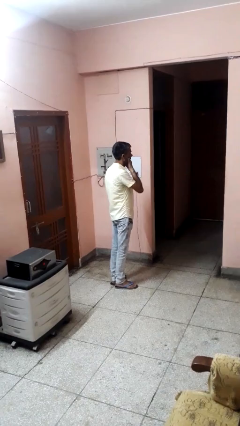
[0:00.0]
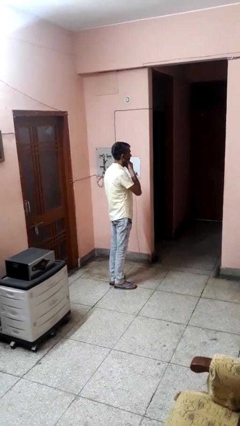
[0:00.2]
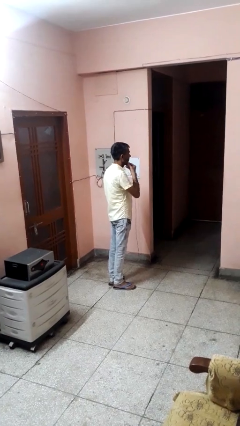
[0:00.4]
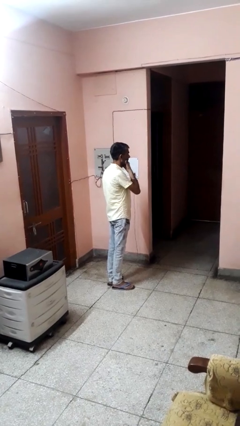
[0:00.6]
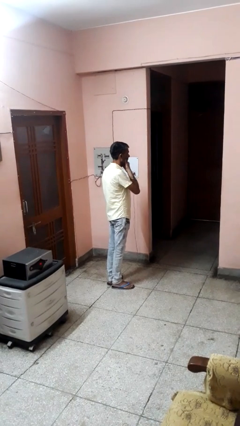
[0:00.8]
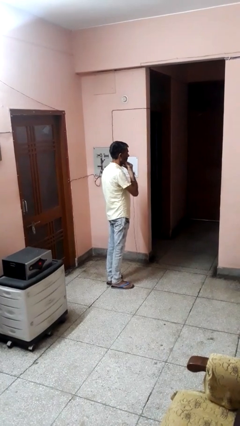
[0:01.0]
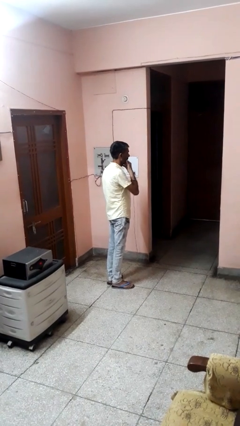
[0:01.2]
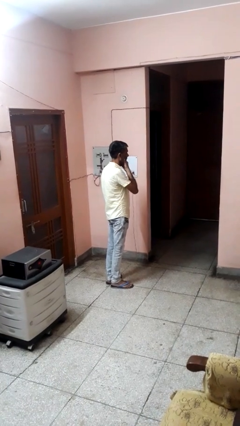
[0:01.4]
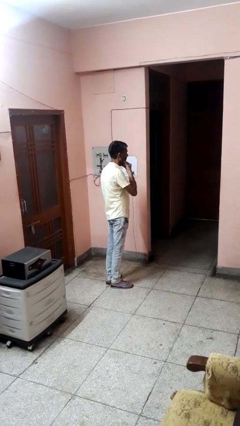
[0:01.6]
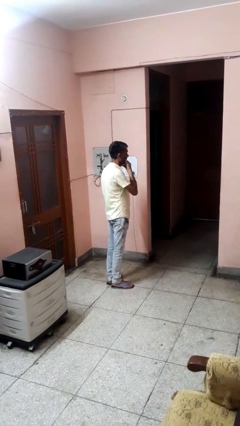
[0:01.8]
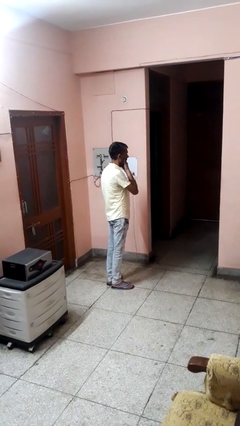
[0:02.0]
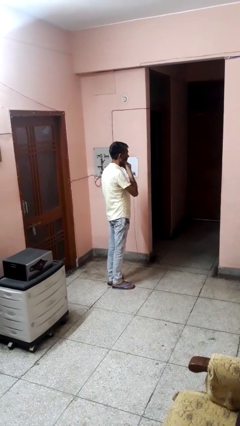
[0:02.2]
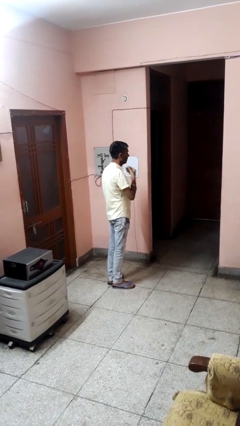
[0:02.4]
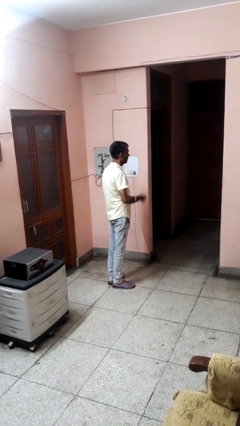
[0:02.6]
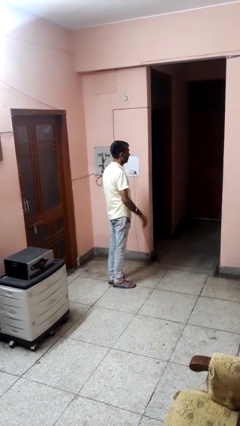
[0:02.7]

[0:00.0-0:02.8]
person strokes chin

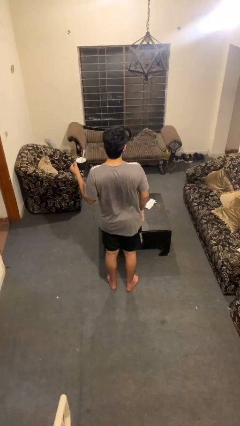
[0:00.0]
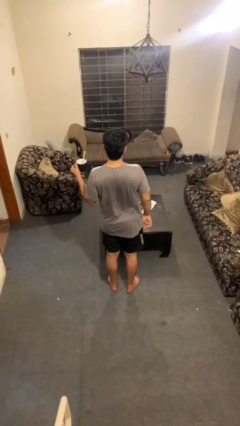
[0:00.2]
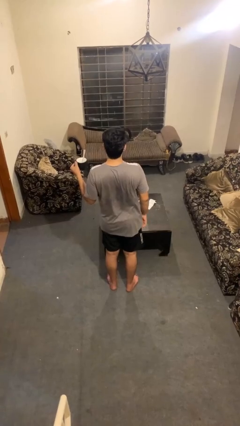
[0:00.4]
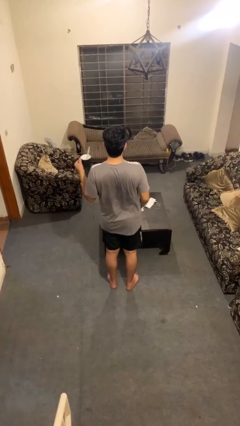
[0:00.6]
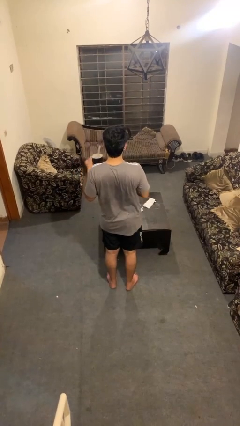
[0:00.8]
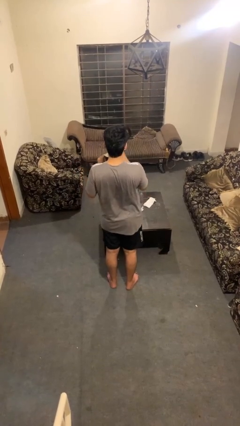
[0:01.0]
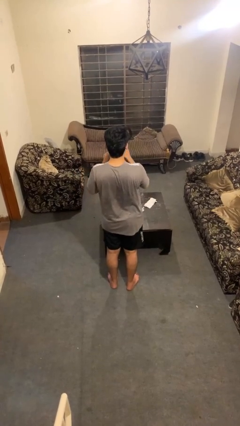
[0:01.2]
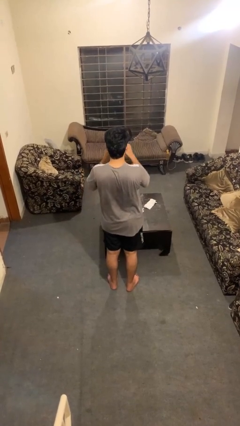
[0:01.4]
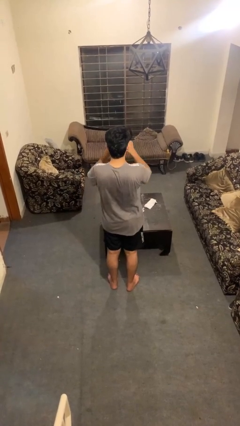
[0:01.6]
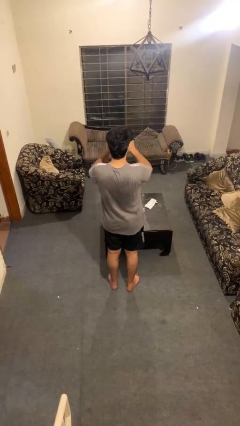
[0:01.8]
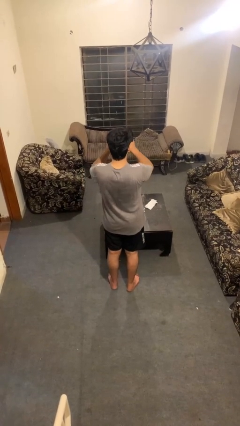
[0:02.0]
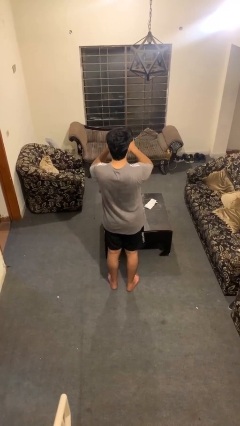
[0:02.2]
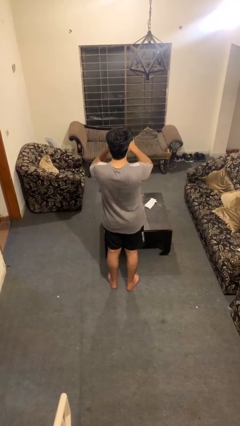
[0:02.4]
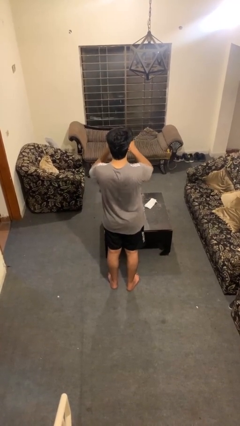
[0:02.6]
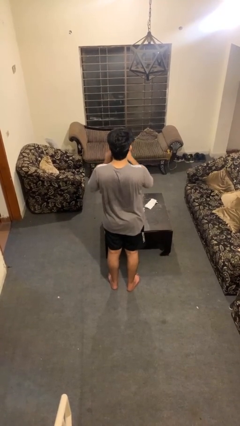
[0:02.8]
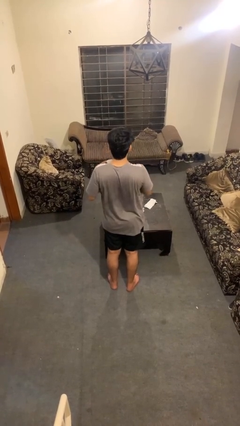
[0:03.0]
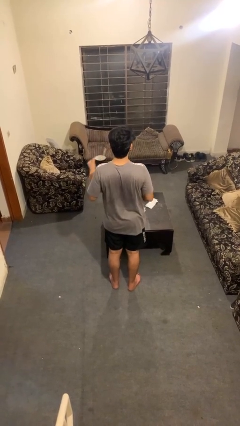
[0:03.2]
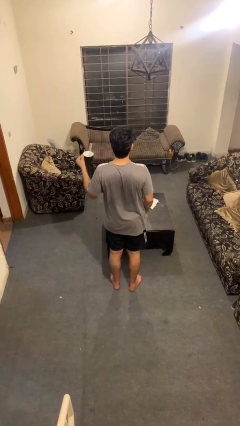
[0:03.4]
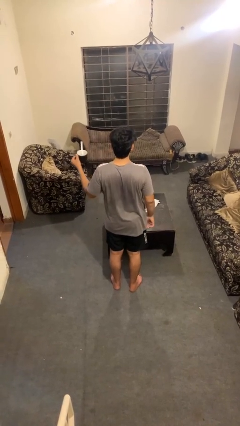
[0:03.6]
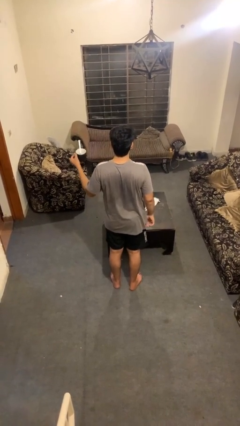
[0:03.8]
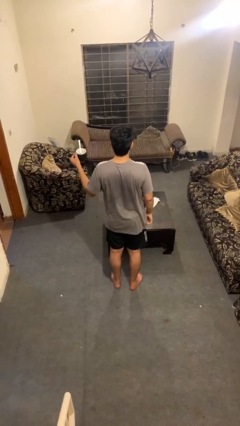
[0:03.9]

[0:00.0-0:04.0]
person drinks from mug

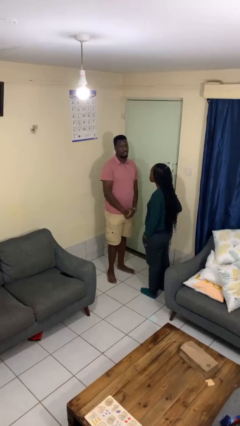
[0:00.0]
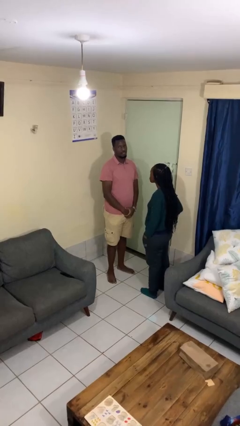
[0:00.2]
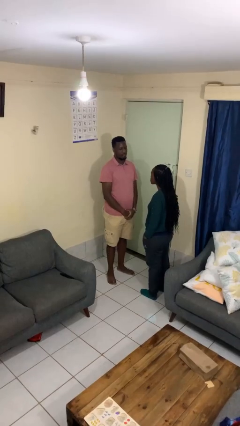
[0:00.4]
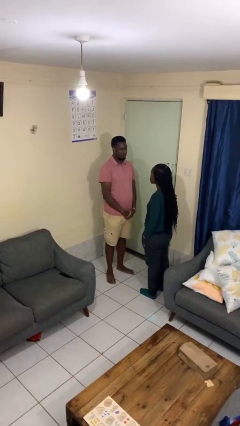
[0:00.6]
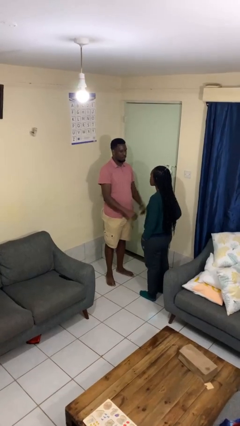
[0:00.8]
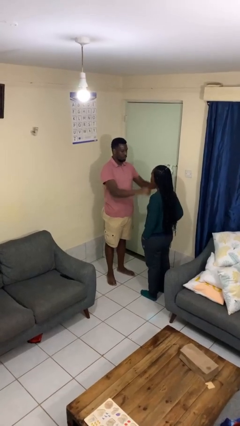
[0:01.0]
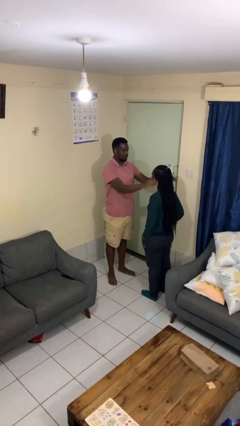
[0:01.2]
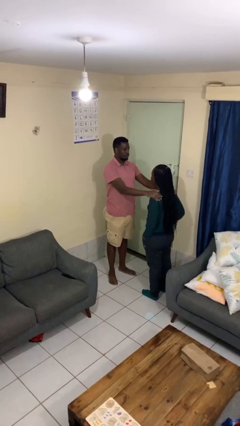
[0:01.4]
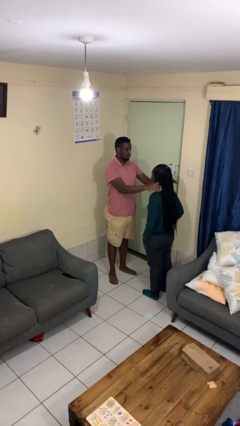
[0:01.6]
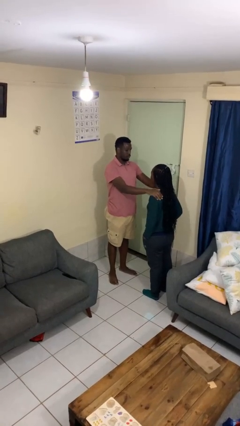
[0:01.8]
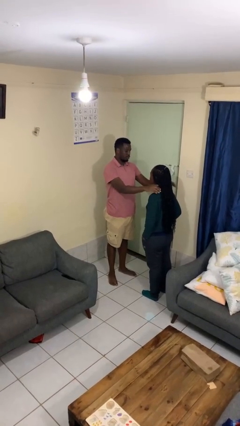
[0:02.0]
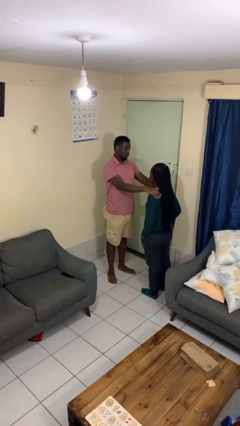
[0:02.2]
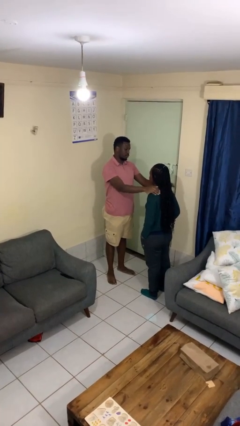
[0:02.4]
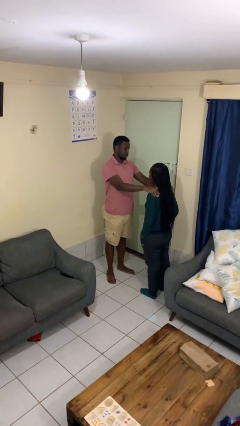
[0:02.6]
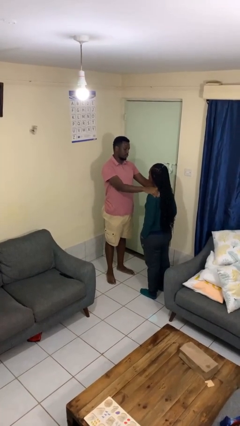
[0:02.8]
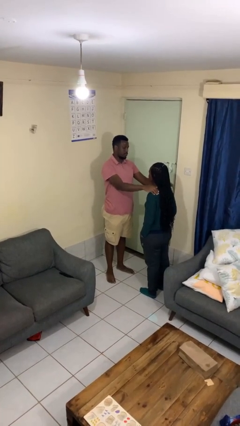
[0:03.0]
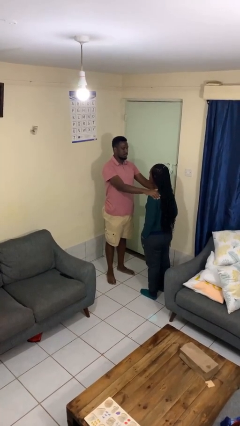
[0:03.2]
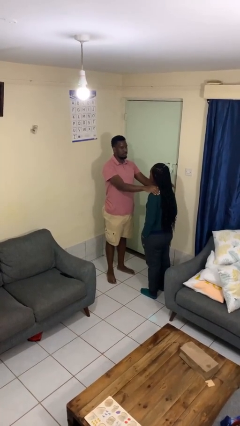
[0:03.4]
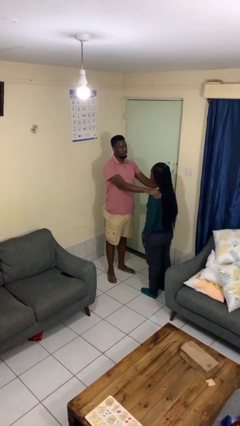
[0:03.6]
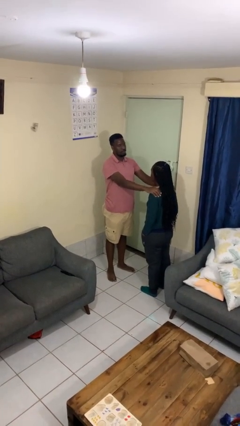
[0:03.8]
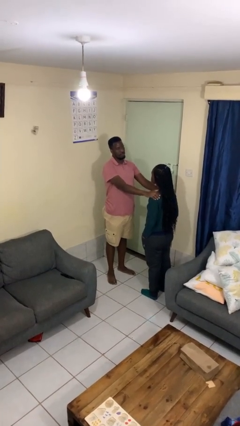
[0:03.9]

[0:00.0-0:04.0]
person pounds shoulders of person

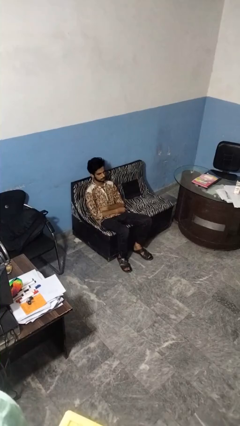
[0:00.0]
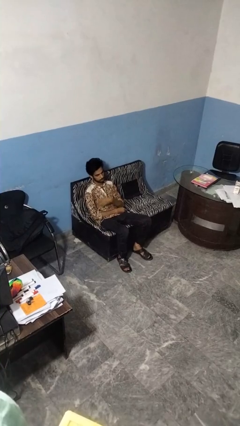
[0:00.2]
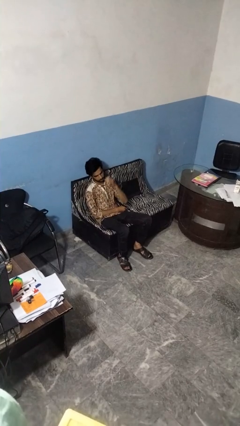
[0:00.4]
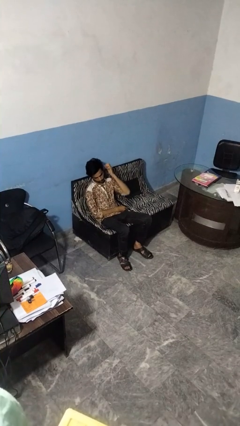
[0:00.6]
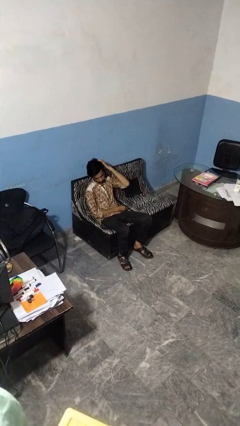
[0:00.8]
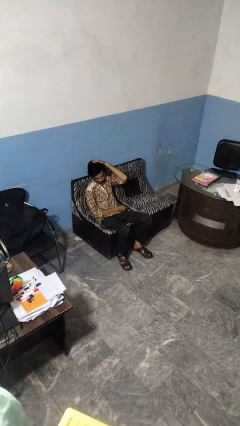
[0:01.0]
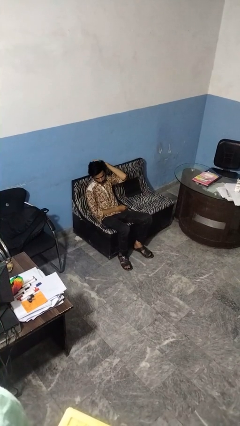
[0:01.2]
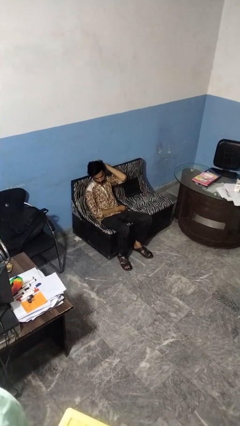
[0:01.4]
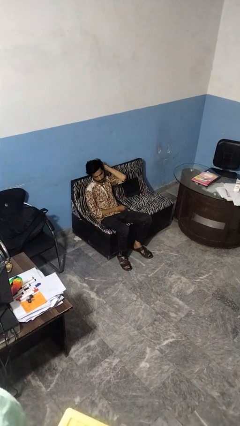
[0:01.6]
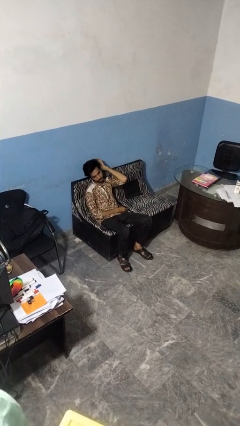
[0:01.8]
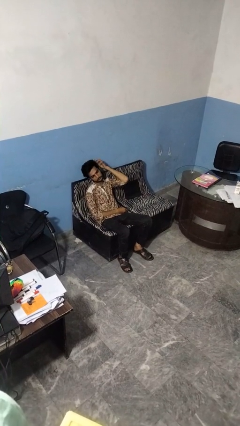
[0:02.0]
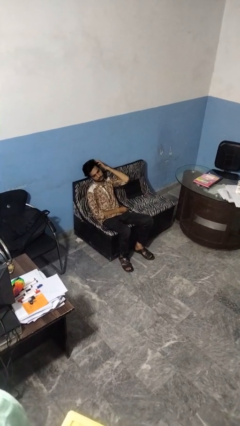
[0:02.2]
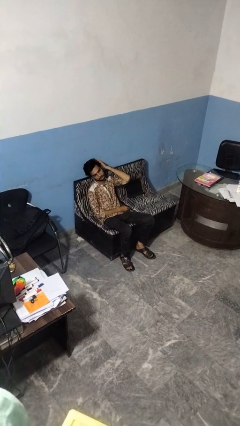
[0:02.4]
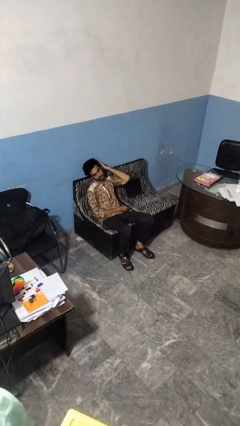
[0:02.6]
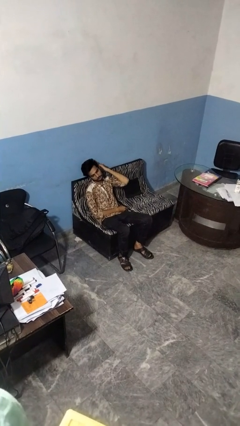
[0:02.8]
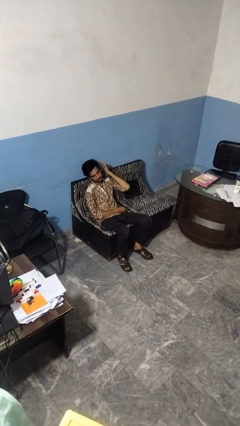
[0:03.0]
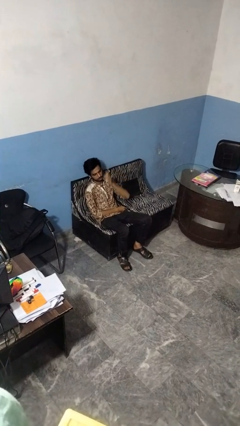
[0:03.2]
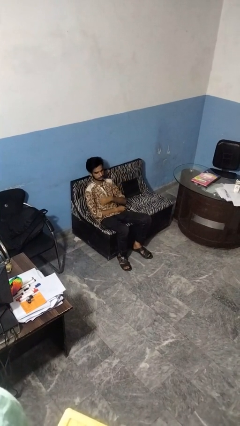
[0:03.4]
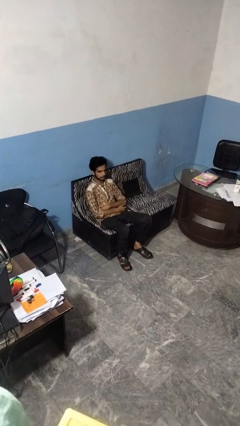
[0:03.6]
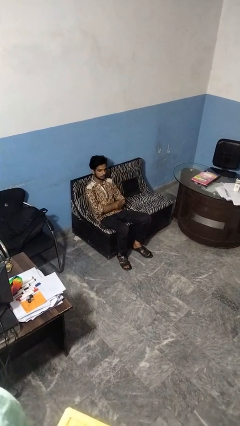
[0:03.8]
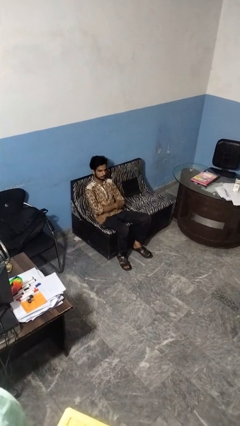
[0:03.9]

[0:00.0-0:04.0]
person strokes hair

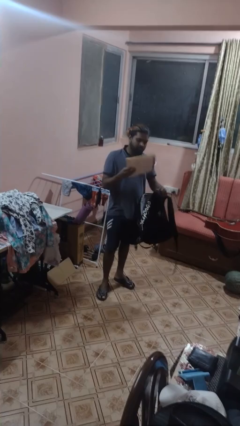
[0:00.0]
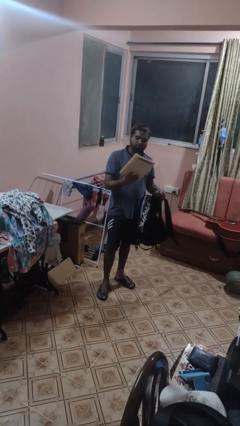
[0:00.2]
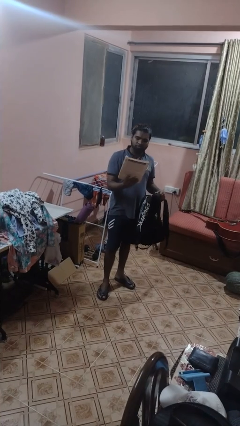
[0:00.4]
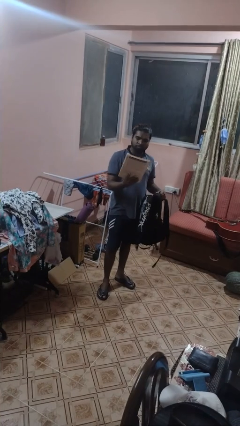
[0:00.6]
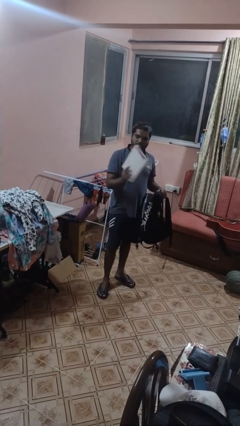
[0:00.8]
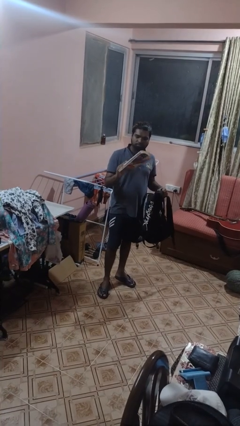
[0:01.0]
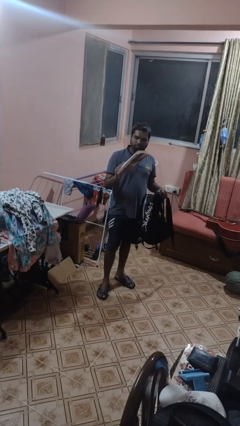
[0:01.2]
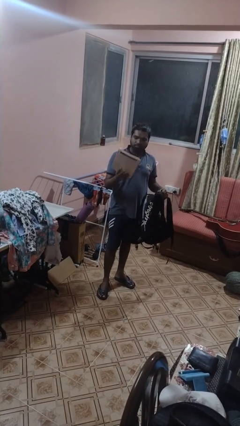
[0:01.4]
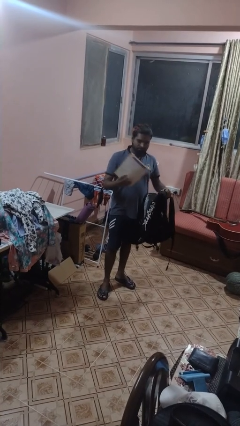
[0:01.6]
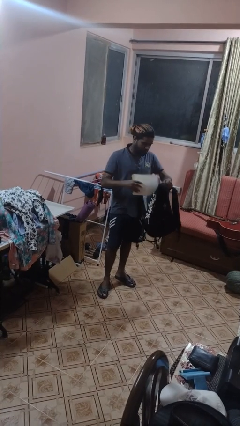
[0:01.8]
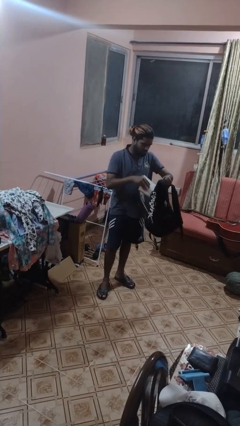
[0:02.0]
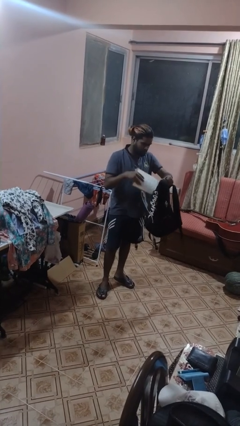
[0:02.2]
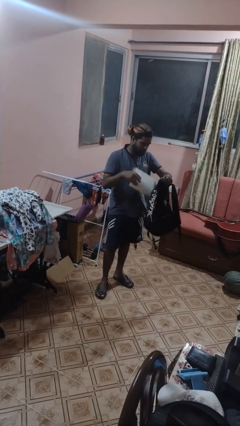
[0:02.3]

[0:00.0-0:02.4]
person takes object from backpack

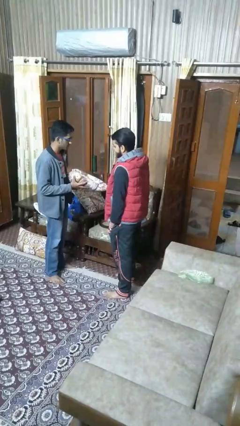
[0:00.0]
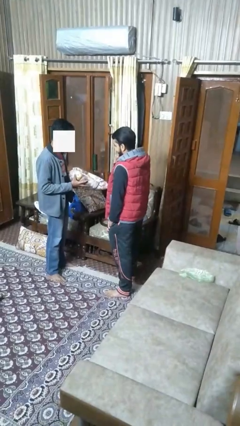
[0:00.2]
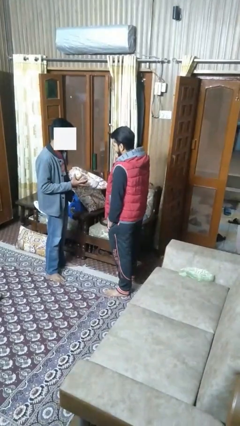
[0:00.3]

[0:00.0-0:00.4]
person transfers object to person
